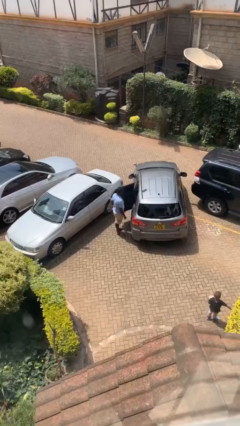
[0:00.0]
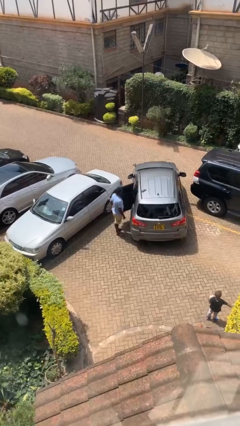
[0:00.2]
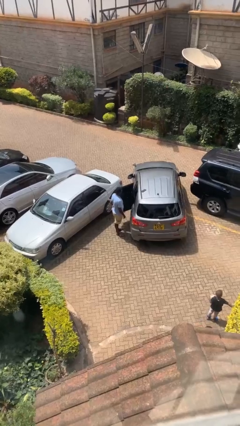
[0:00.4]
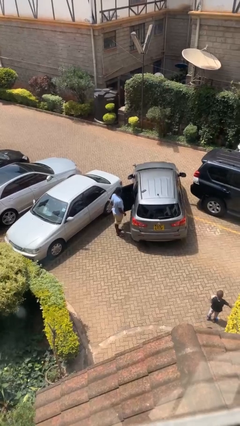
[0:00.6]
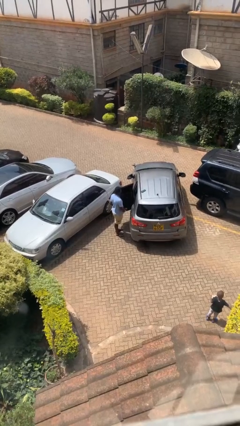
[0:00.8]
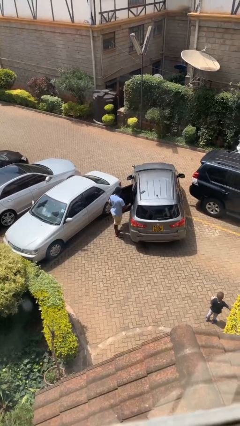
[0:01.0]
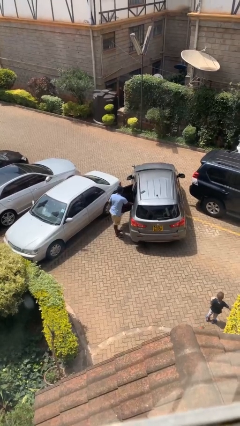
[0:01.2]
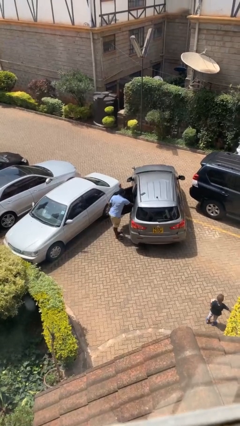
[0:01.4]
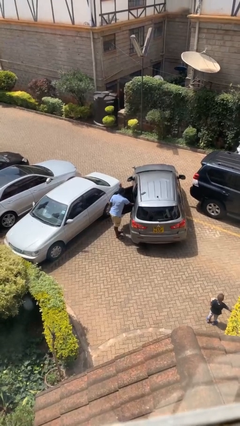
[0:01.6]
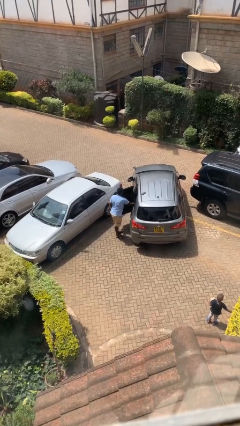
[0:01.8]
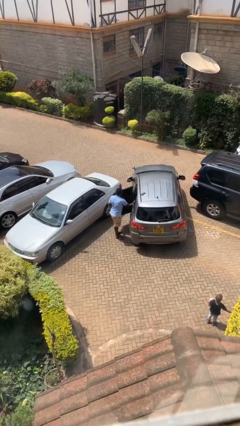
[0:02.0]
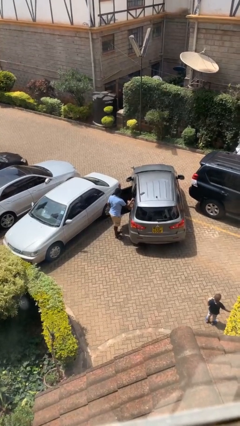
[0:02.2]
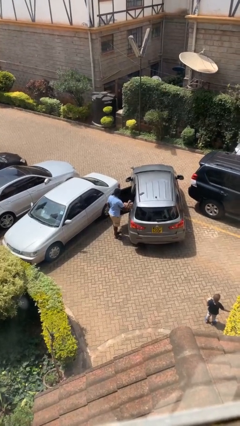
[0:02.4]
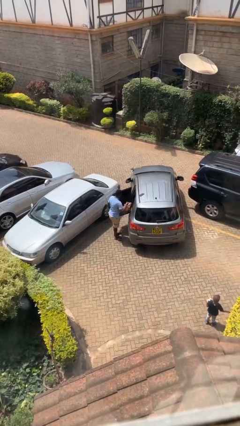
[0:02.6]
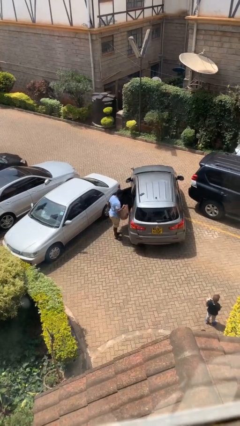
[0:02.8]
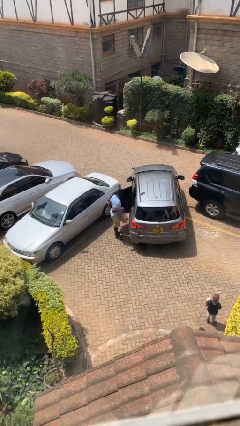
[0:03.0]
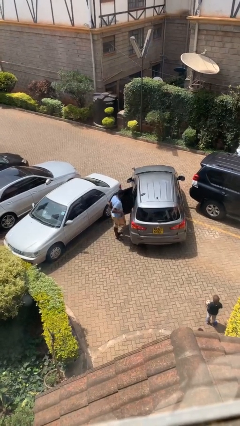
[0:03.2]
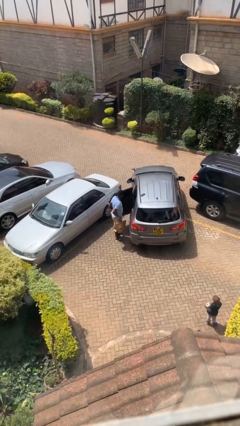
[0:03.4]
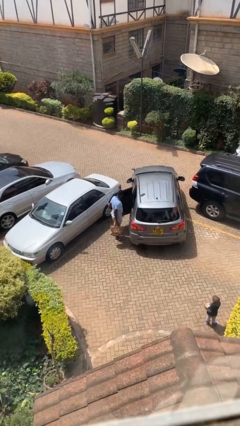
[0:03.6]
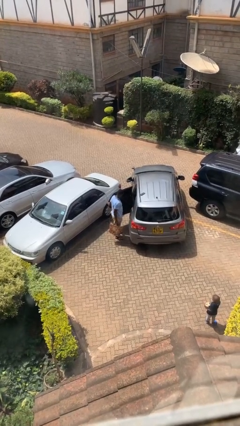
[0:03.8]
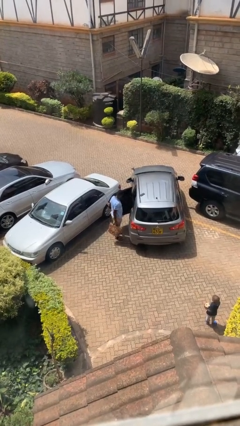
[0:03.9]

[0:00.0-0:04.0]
person unloads car

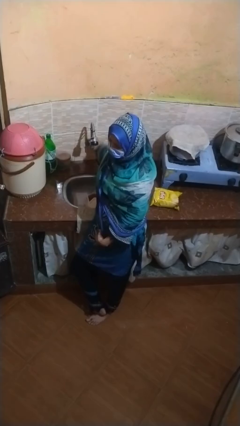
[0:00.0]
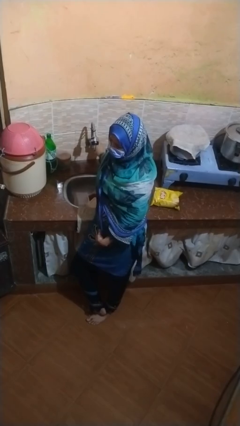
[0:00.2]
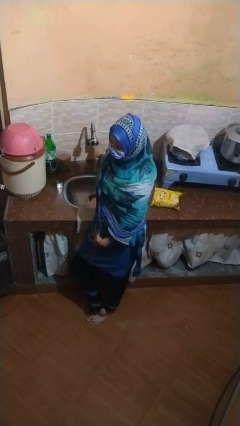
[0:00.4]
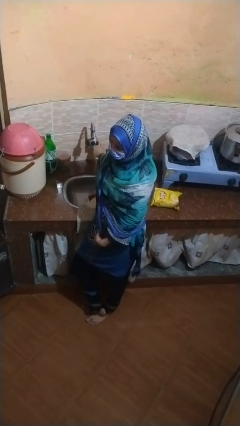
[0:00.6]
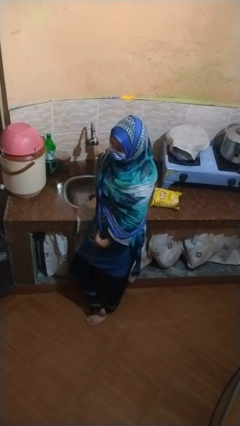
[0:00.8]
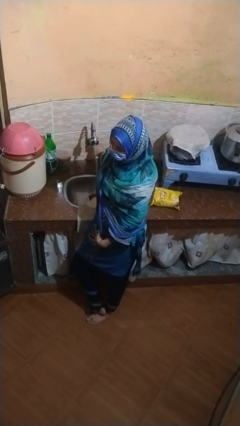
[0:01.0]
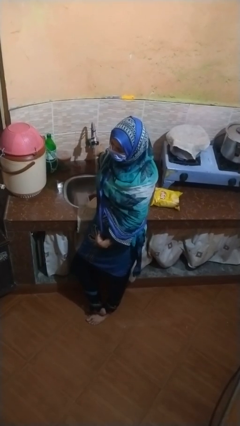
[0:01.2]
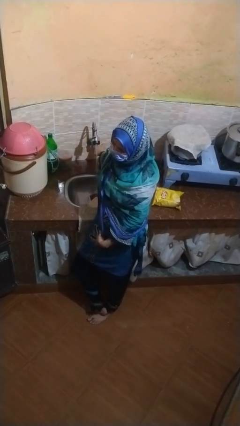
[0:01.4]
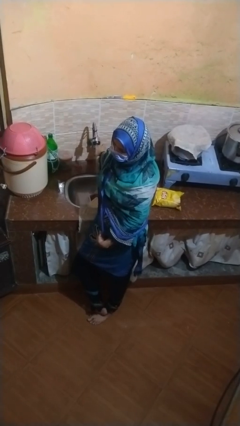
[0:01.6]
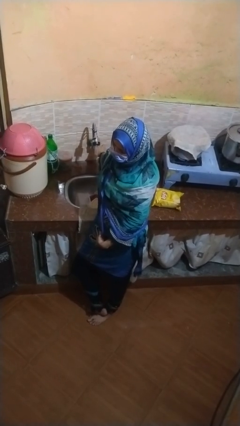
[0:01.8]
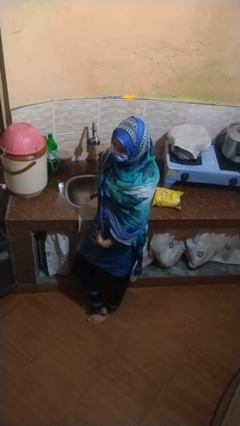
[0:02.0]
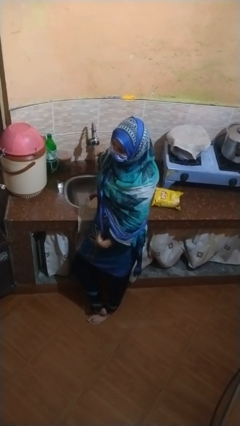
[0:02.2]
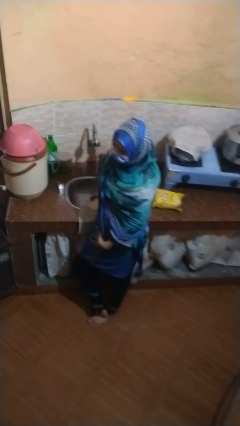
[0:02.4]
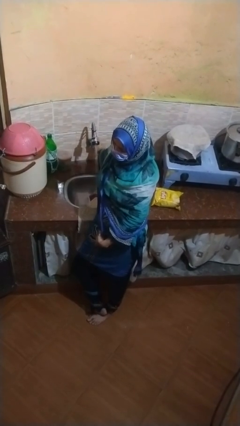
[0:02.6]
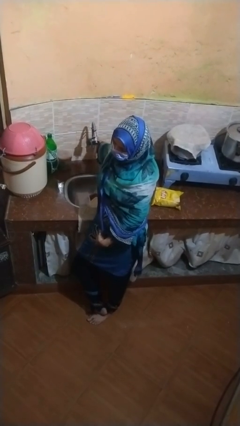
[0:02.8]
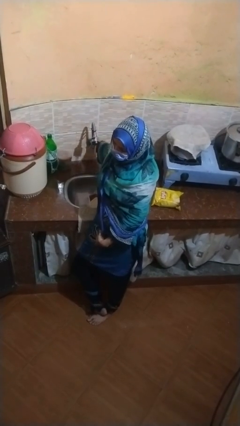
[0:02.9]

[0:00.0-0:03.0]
person turns on faucet

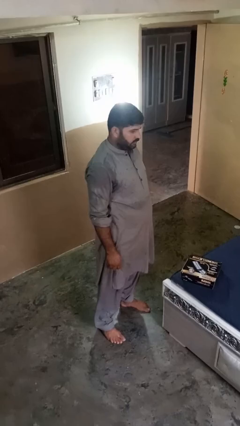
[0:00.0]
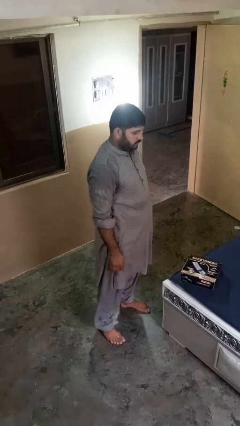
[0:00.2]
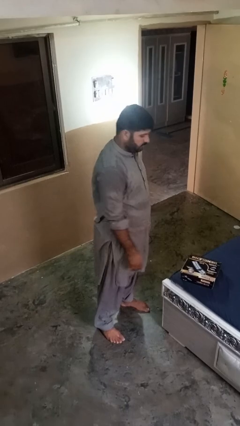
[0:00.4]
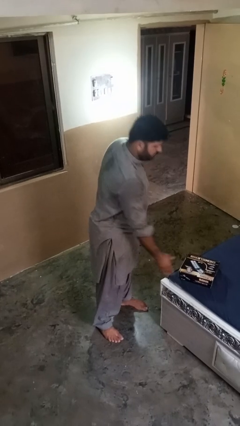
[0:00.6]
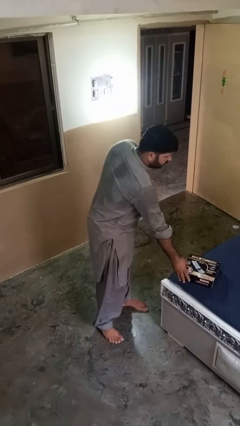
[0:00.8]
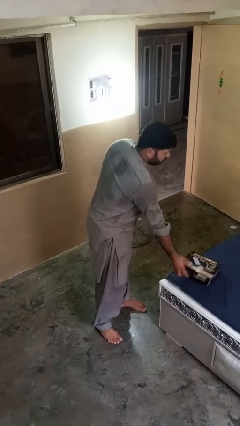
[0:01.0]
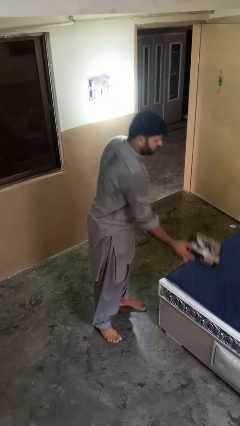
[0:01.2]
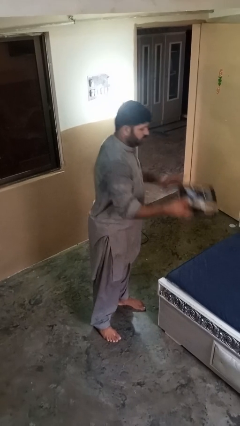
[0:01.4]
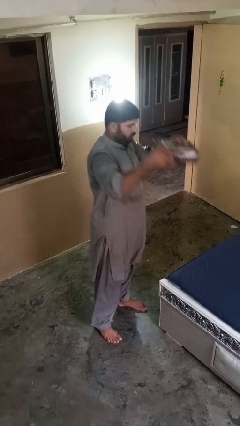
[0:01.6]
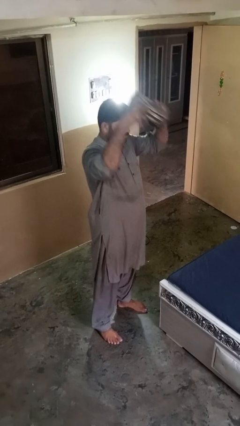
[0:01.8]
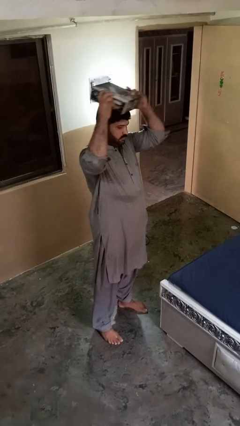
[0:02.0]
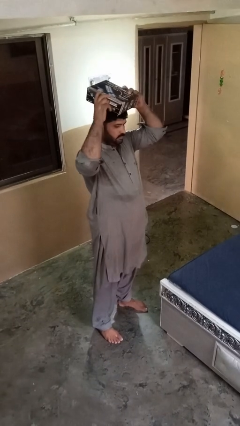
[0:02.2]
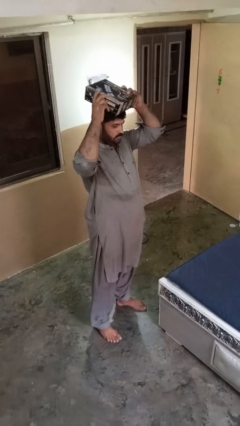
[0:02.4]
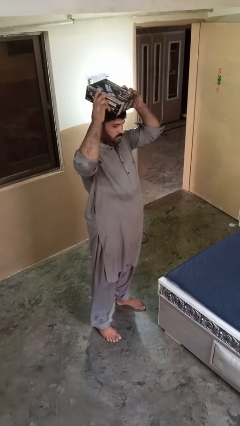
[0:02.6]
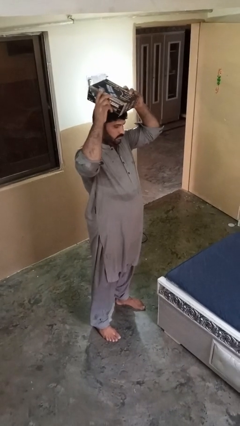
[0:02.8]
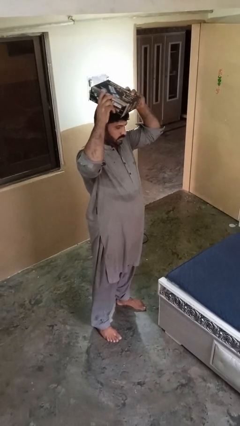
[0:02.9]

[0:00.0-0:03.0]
person holds object above head

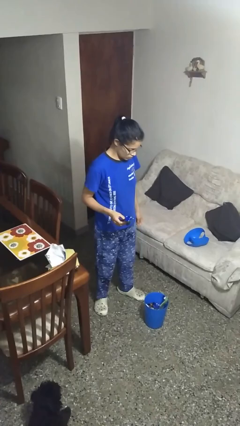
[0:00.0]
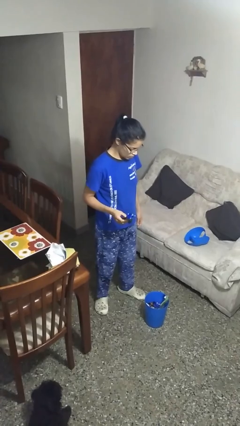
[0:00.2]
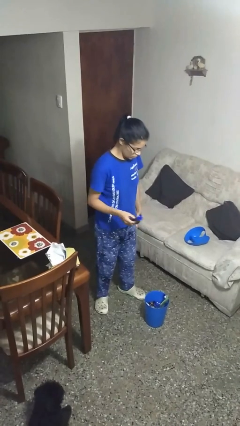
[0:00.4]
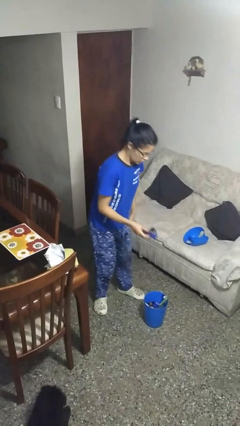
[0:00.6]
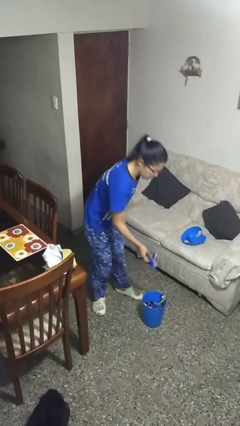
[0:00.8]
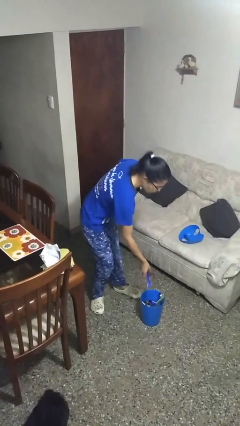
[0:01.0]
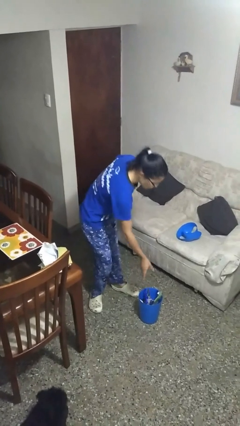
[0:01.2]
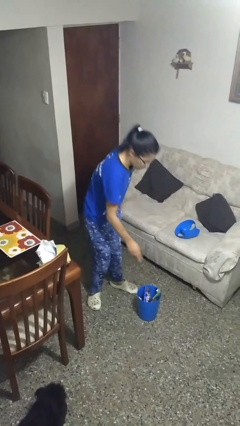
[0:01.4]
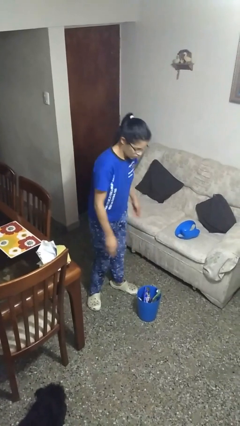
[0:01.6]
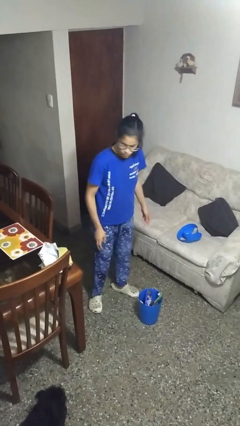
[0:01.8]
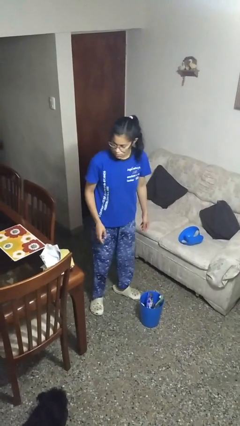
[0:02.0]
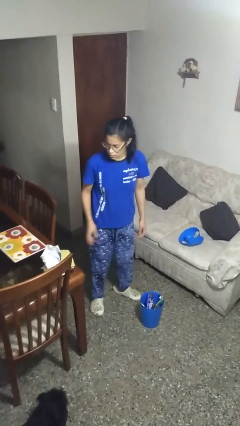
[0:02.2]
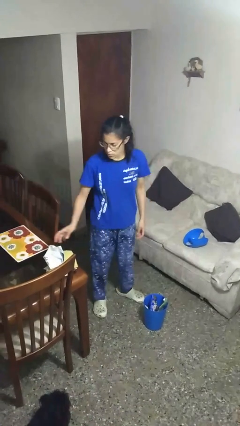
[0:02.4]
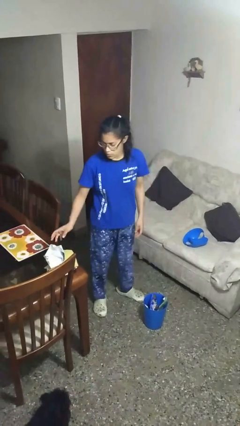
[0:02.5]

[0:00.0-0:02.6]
person discards trash

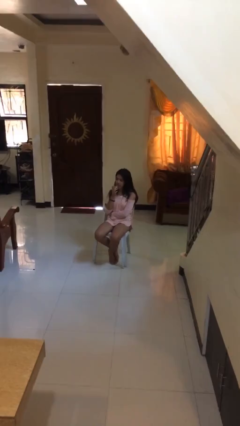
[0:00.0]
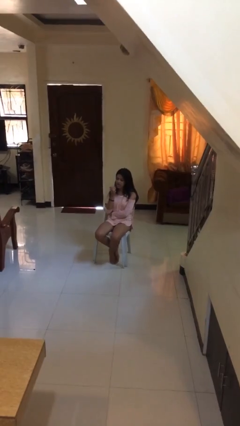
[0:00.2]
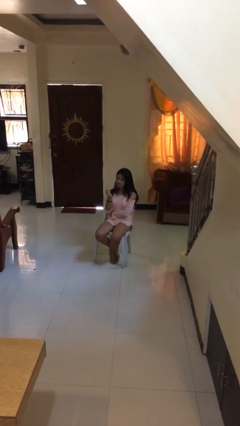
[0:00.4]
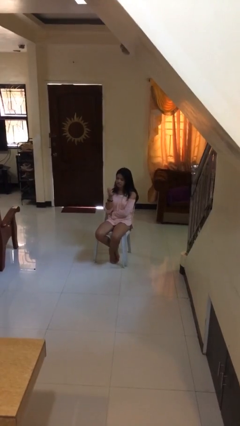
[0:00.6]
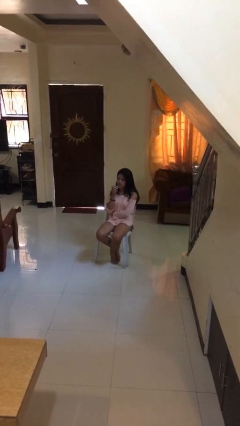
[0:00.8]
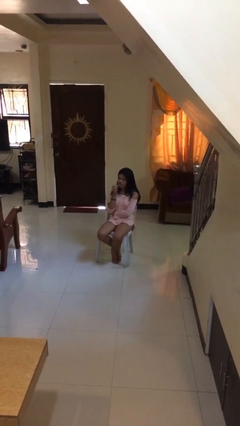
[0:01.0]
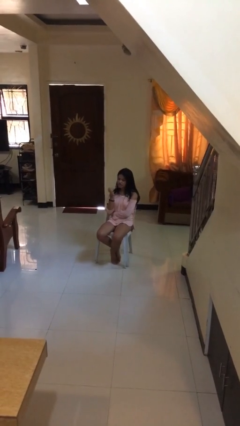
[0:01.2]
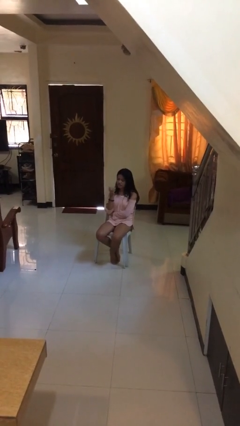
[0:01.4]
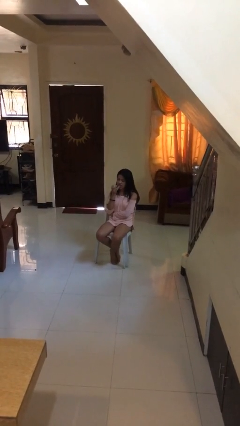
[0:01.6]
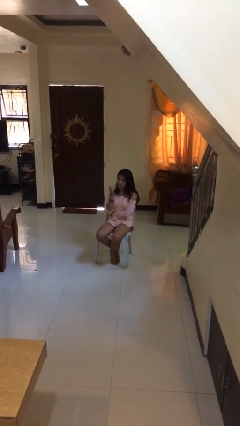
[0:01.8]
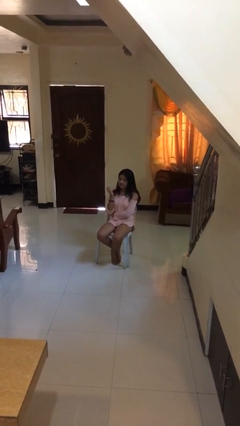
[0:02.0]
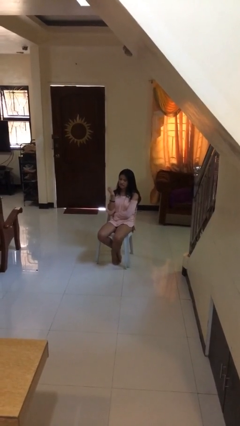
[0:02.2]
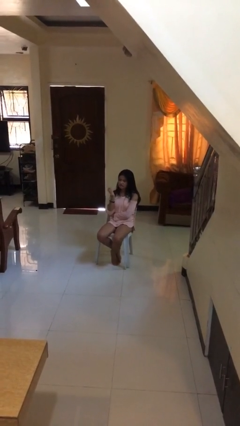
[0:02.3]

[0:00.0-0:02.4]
person licks fingers

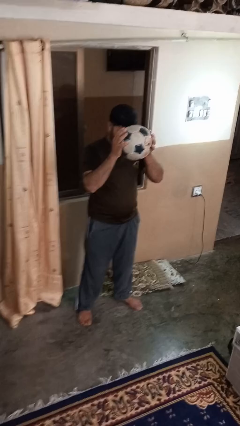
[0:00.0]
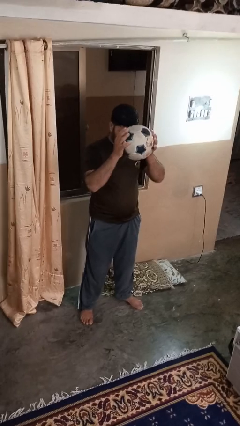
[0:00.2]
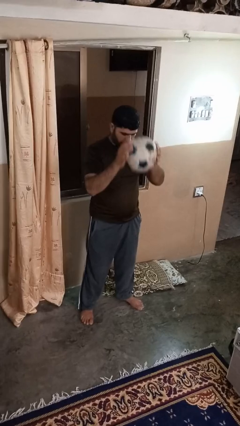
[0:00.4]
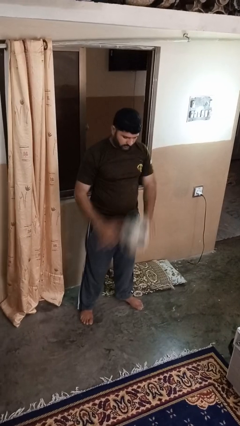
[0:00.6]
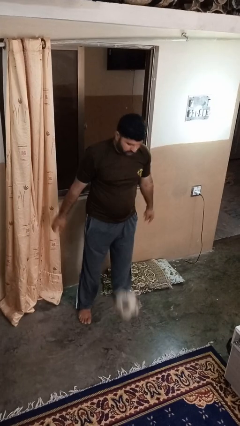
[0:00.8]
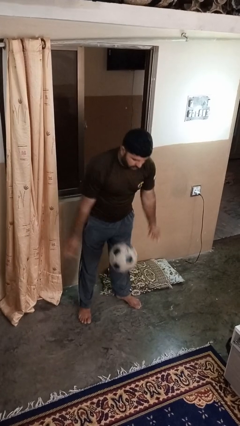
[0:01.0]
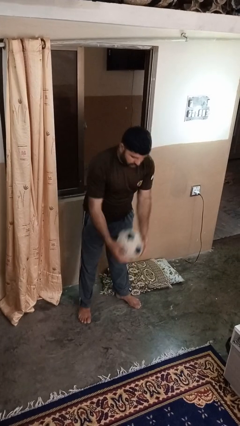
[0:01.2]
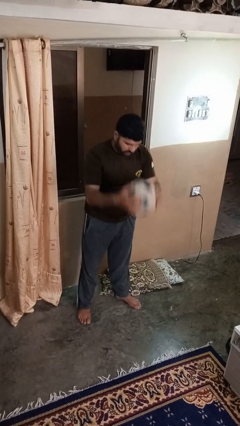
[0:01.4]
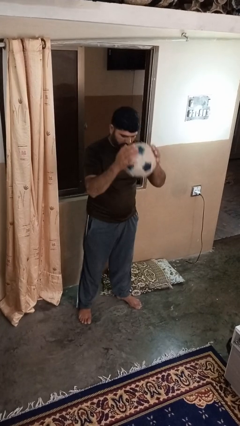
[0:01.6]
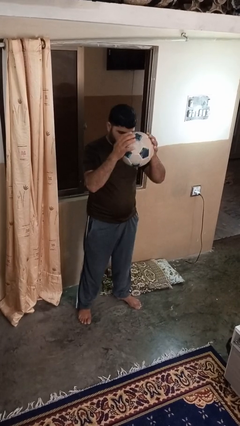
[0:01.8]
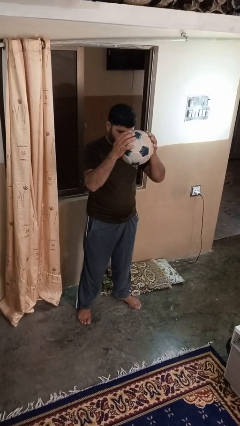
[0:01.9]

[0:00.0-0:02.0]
person bounces ball on floor

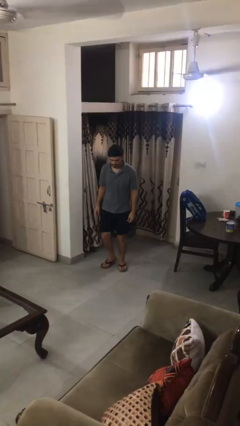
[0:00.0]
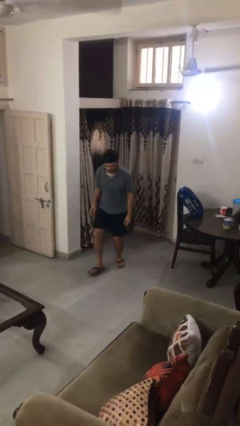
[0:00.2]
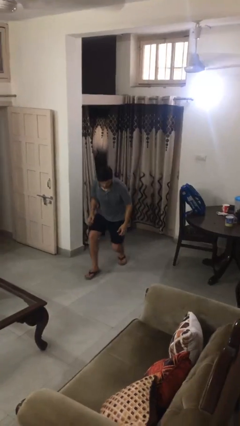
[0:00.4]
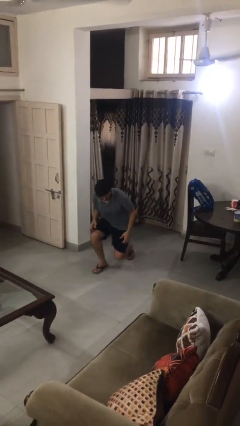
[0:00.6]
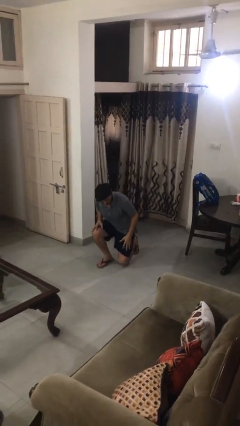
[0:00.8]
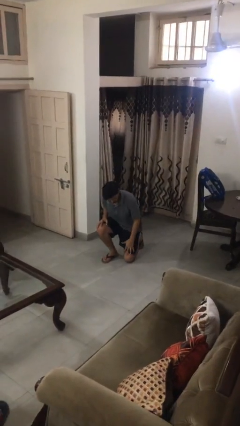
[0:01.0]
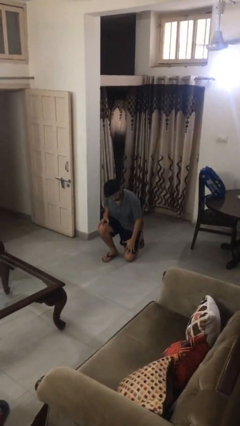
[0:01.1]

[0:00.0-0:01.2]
person kneels
